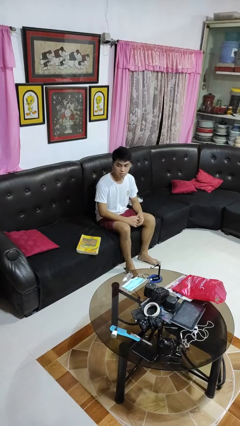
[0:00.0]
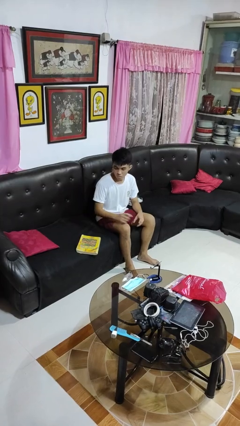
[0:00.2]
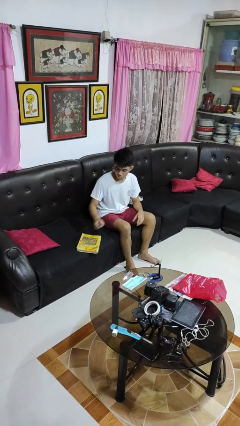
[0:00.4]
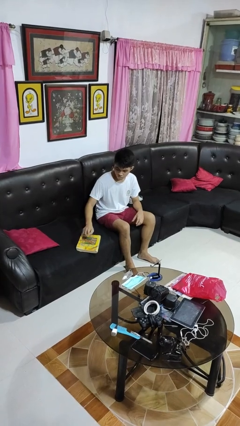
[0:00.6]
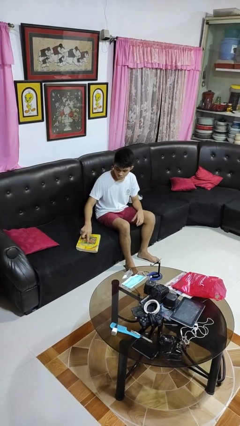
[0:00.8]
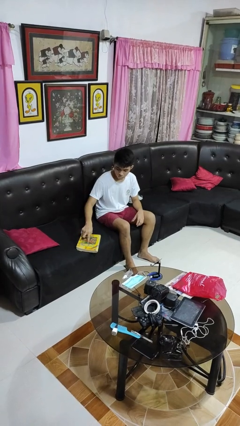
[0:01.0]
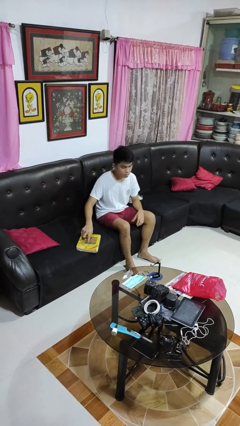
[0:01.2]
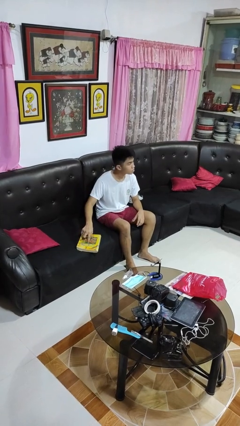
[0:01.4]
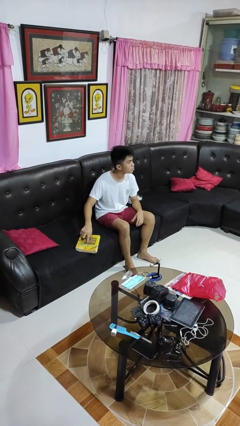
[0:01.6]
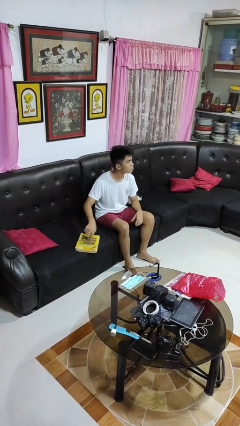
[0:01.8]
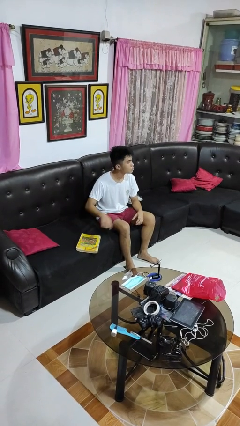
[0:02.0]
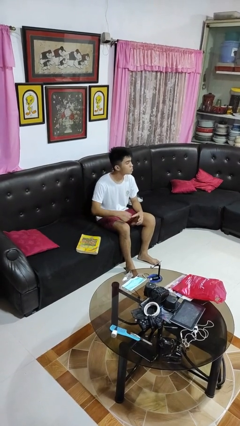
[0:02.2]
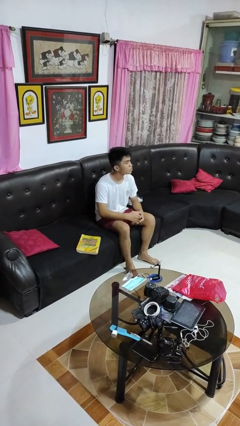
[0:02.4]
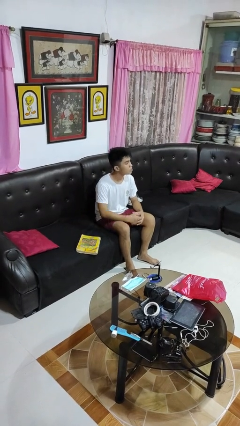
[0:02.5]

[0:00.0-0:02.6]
person taps object with finger

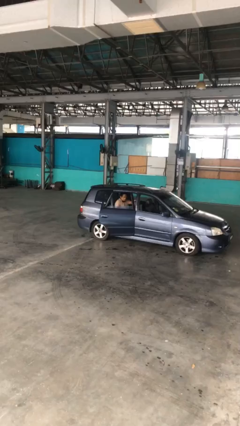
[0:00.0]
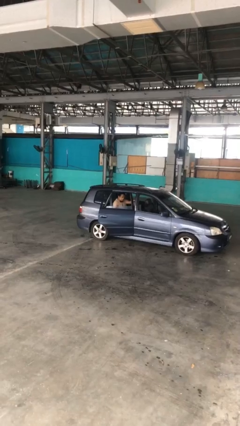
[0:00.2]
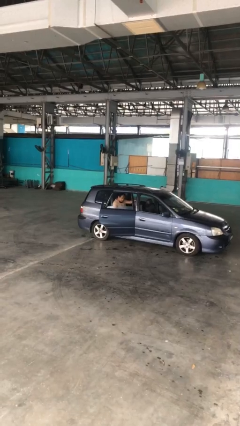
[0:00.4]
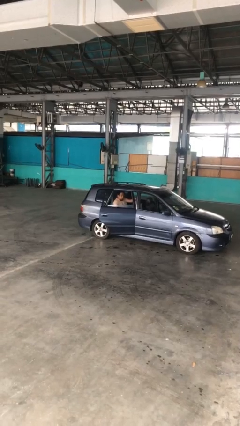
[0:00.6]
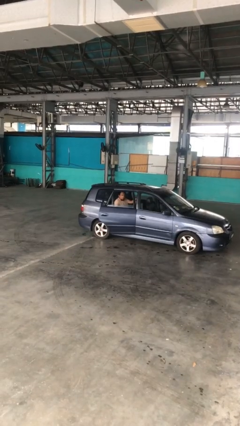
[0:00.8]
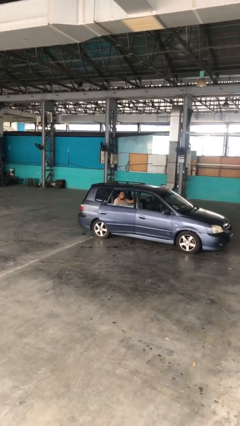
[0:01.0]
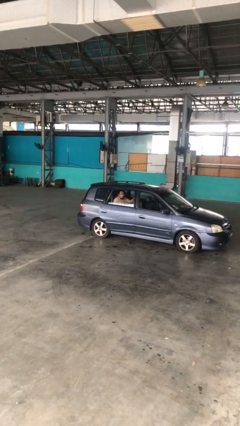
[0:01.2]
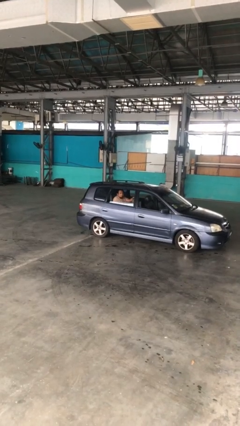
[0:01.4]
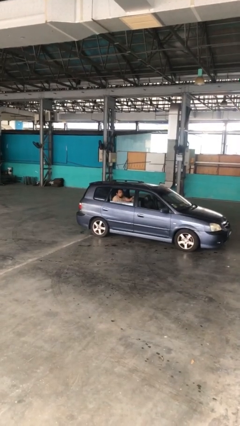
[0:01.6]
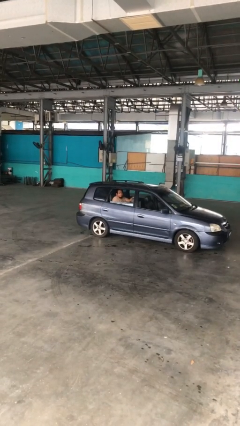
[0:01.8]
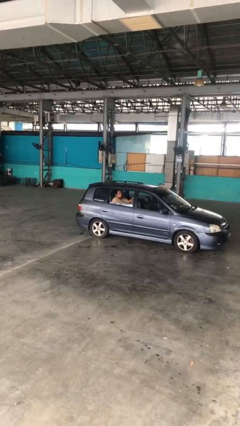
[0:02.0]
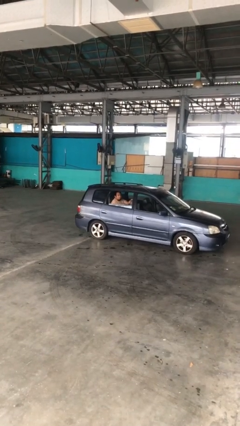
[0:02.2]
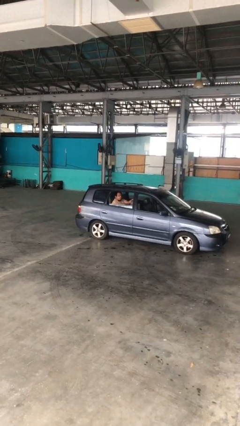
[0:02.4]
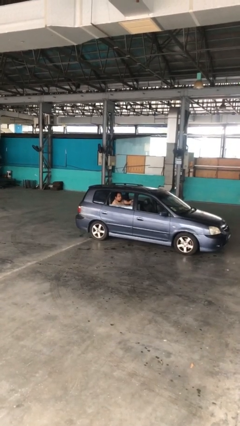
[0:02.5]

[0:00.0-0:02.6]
person closes car door

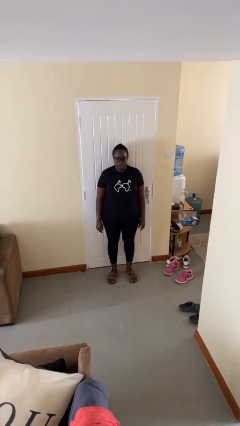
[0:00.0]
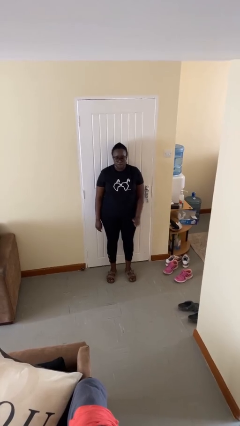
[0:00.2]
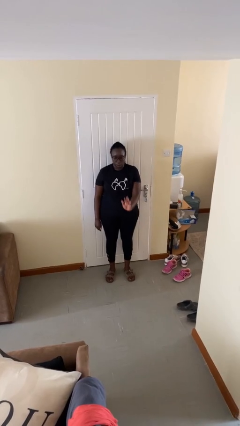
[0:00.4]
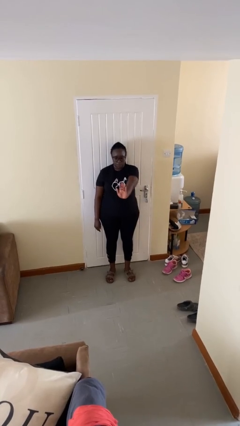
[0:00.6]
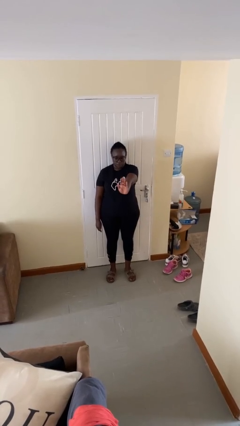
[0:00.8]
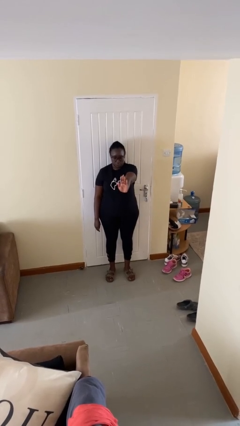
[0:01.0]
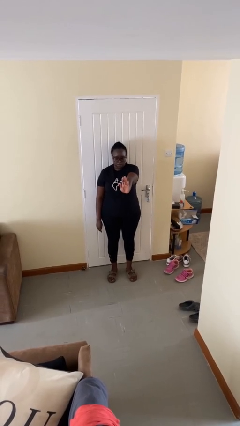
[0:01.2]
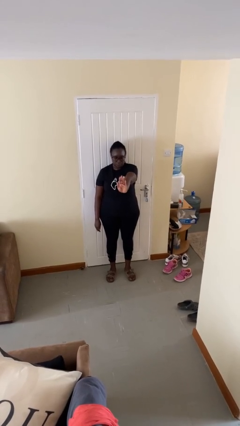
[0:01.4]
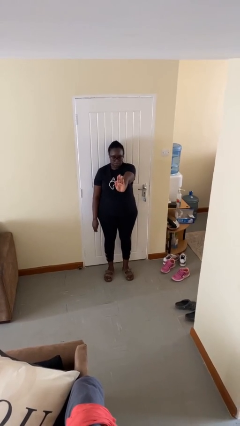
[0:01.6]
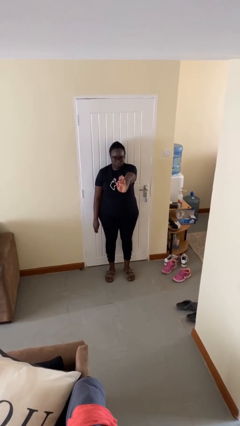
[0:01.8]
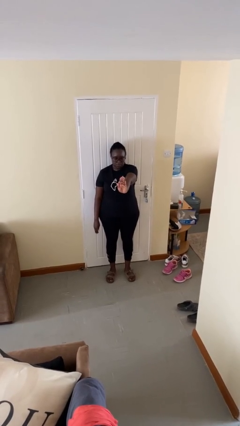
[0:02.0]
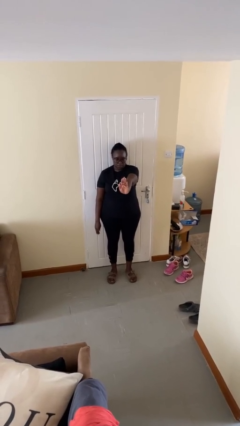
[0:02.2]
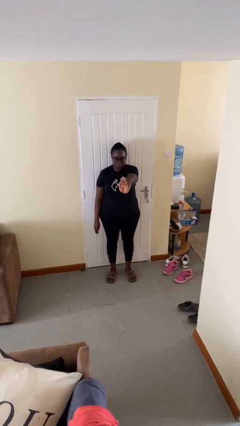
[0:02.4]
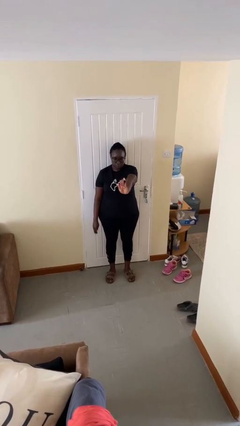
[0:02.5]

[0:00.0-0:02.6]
person gestures stop

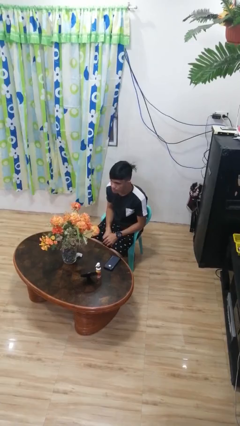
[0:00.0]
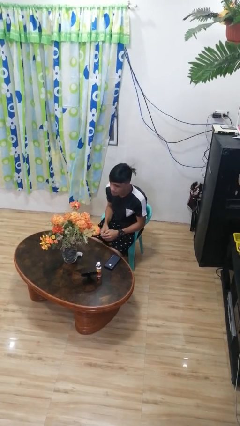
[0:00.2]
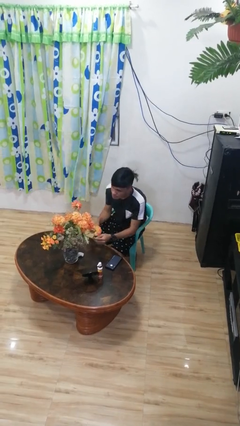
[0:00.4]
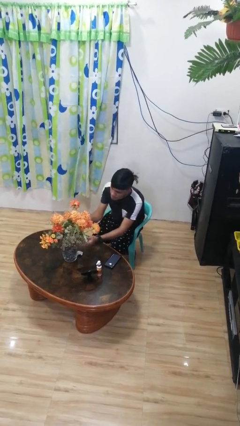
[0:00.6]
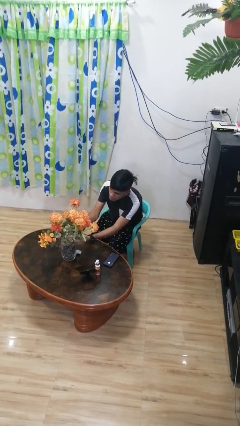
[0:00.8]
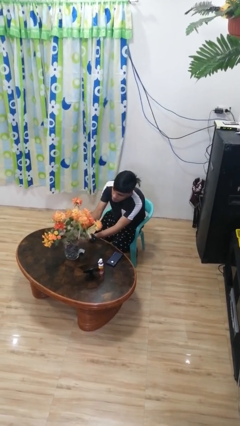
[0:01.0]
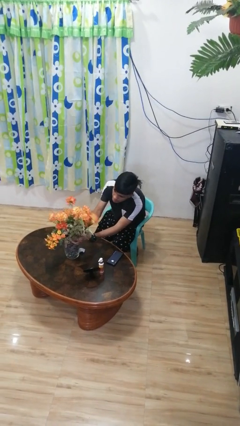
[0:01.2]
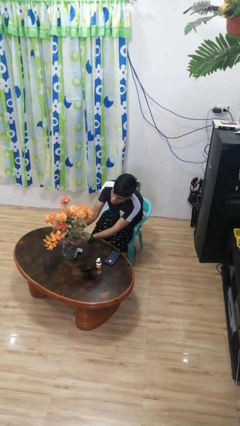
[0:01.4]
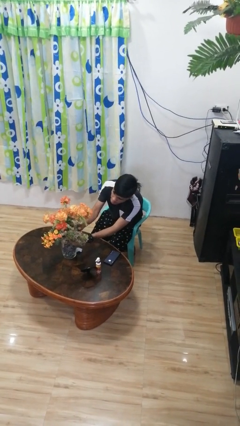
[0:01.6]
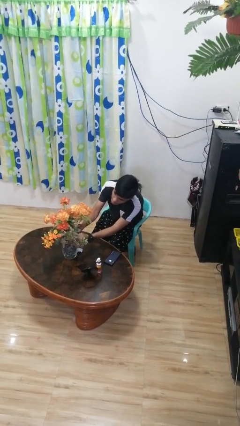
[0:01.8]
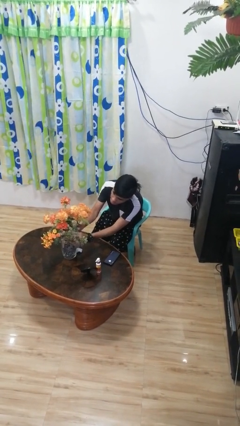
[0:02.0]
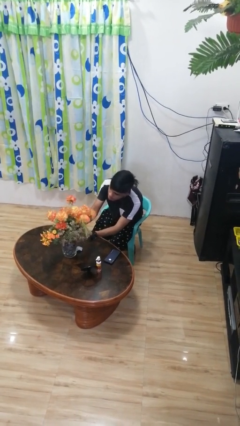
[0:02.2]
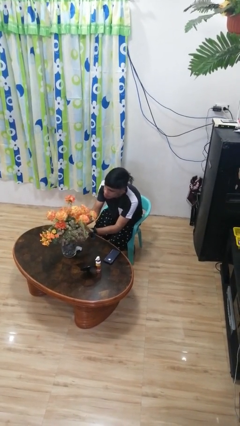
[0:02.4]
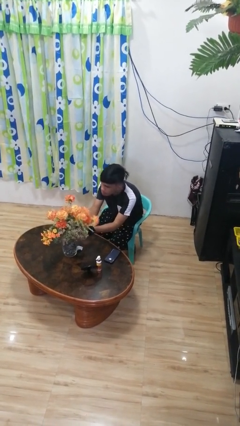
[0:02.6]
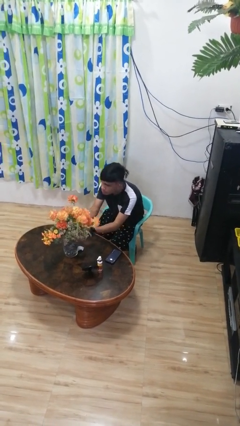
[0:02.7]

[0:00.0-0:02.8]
person arranges flowers in vase

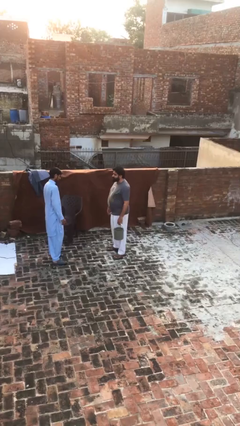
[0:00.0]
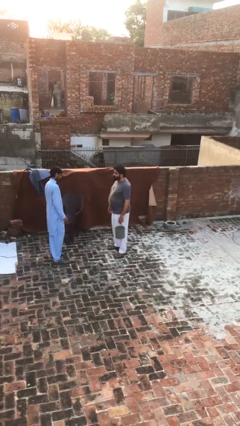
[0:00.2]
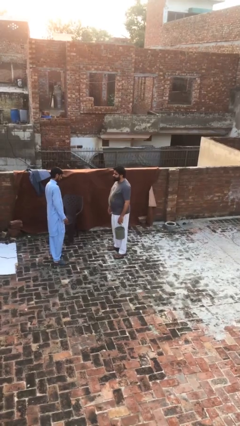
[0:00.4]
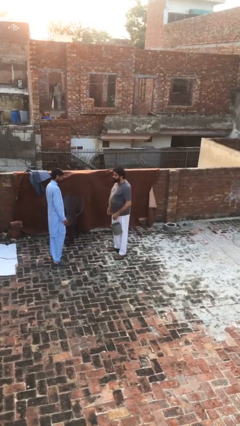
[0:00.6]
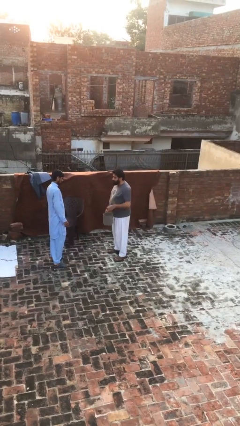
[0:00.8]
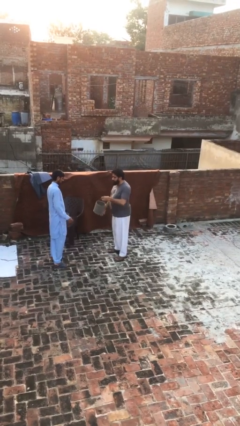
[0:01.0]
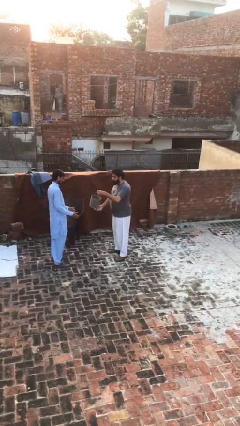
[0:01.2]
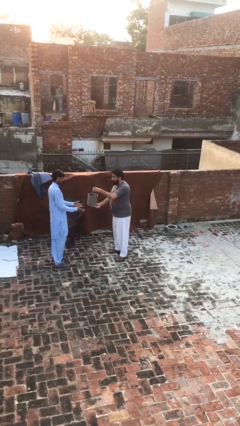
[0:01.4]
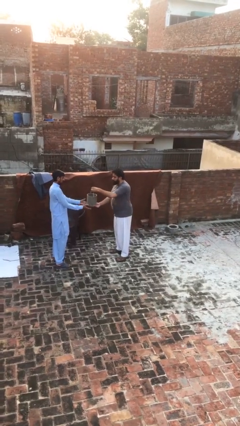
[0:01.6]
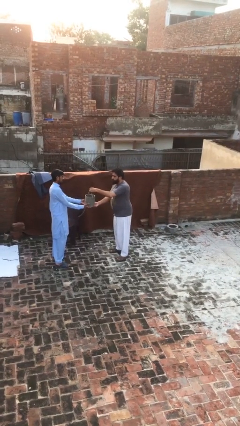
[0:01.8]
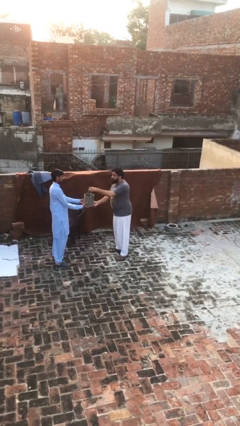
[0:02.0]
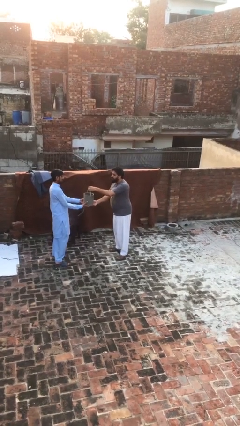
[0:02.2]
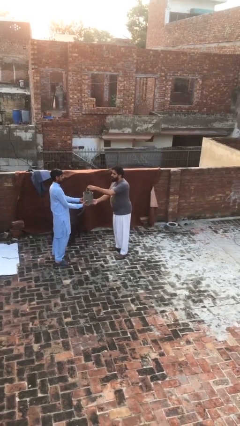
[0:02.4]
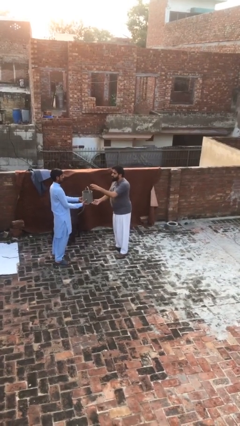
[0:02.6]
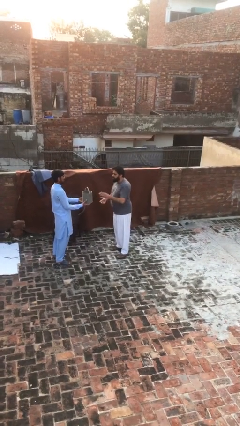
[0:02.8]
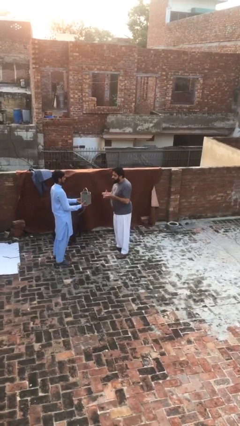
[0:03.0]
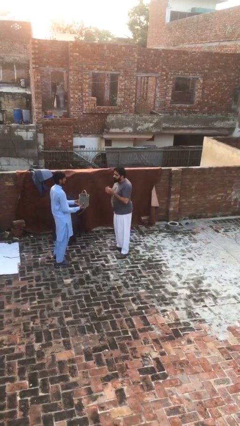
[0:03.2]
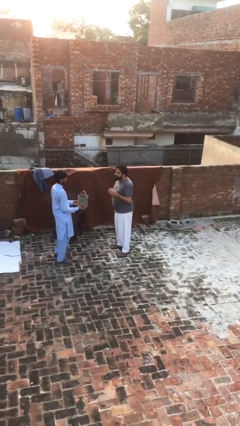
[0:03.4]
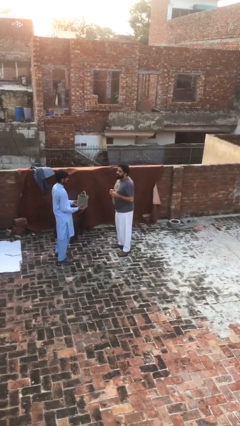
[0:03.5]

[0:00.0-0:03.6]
person transfers object to person

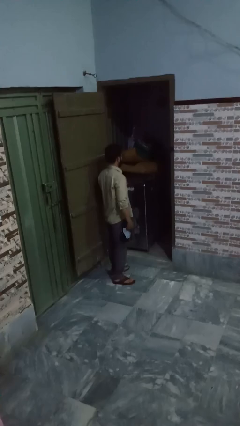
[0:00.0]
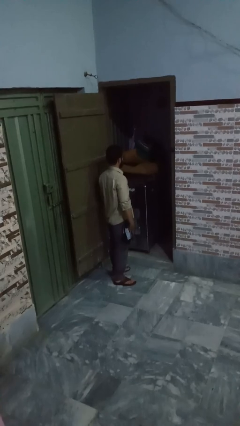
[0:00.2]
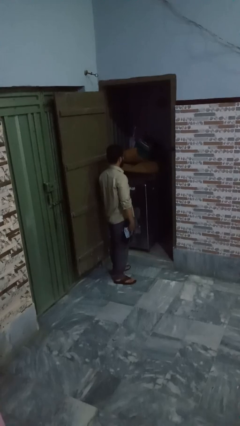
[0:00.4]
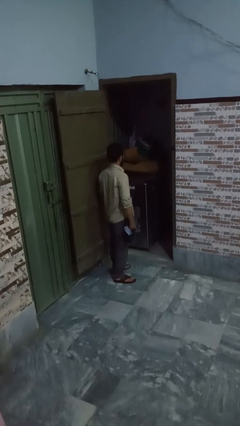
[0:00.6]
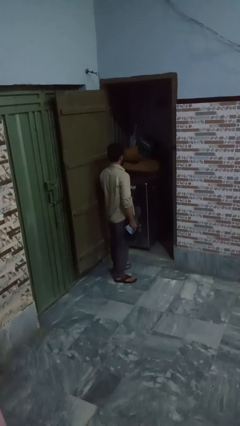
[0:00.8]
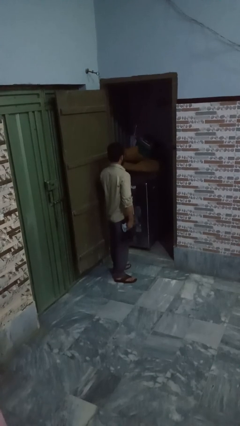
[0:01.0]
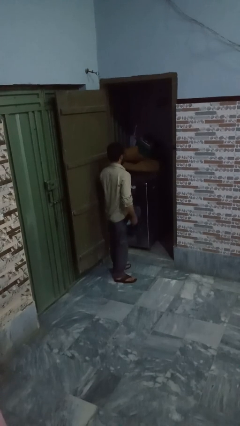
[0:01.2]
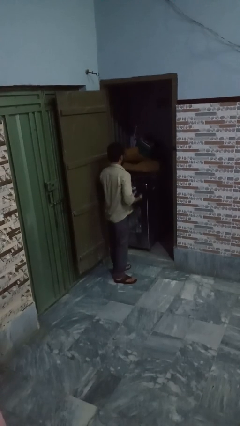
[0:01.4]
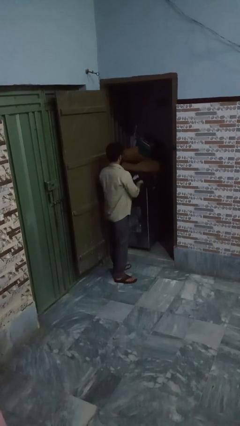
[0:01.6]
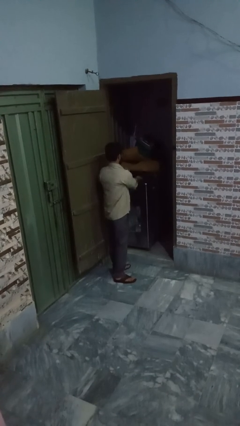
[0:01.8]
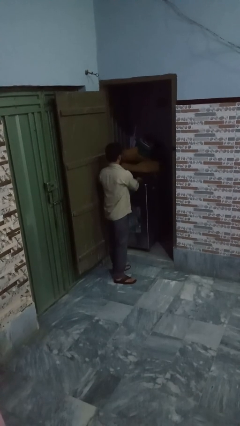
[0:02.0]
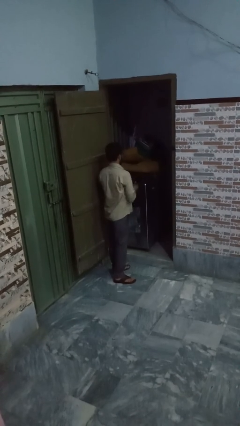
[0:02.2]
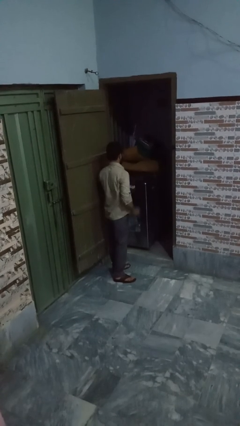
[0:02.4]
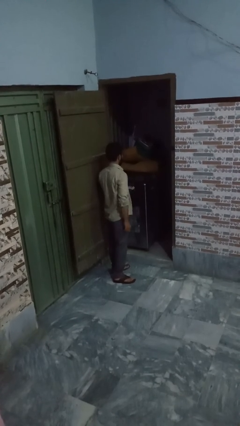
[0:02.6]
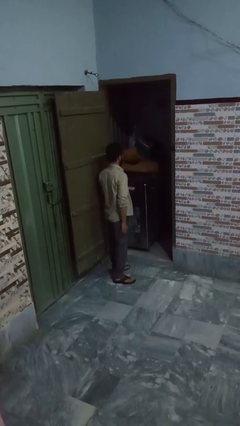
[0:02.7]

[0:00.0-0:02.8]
person loads dryer

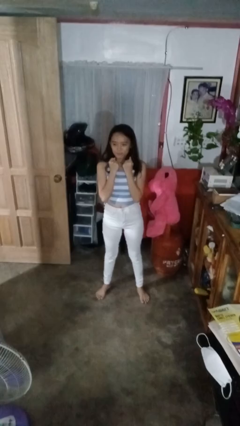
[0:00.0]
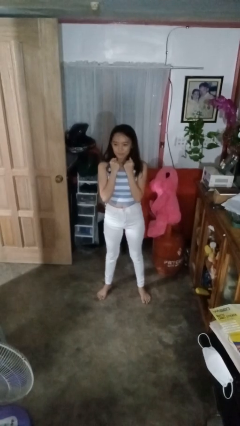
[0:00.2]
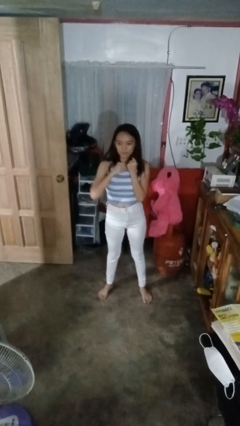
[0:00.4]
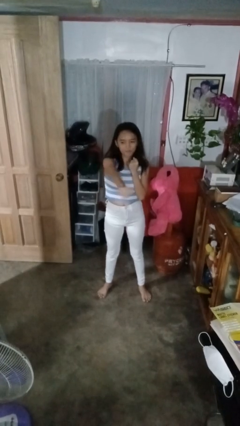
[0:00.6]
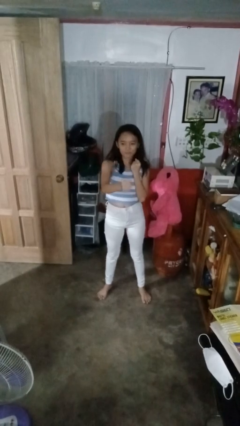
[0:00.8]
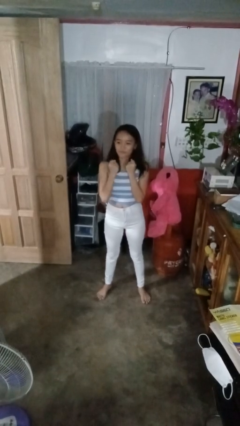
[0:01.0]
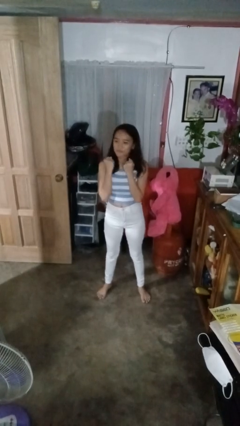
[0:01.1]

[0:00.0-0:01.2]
person punches
